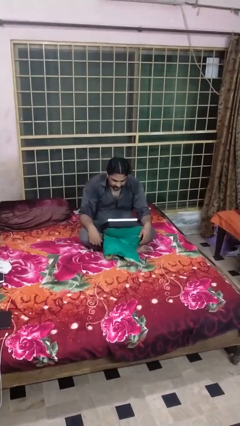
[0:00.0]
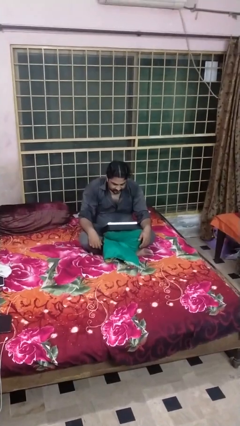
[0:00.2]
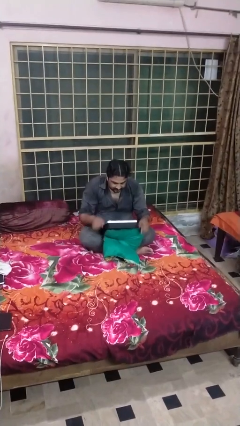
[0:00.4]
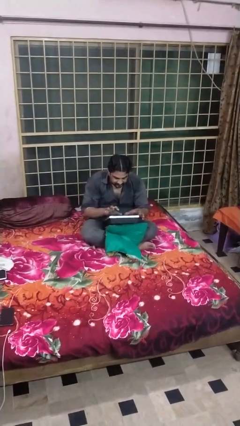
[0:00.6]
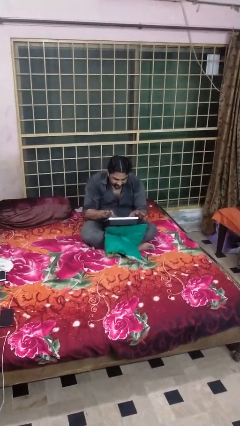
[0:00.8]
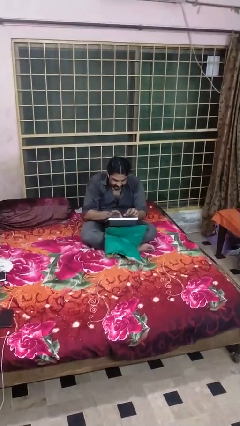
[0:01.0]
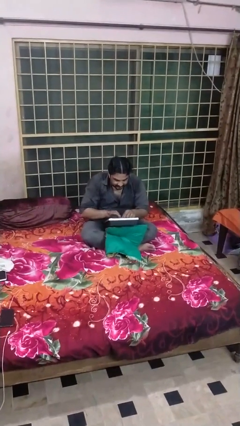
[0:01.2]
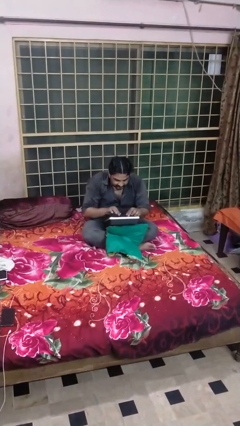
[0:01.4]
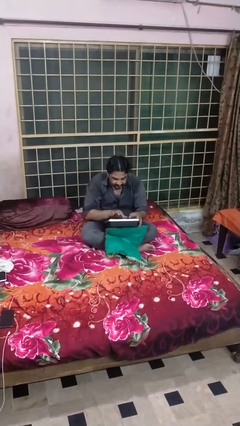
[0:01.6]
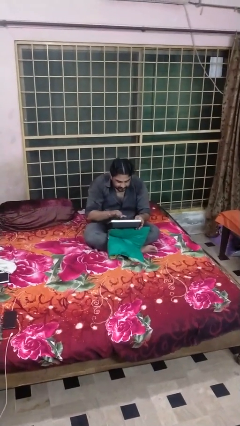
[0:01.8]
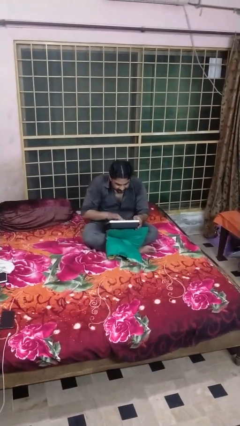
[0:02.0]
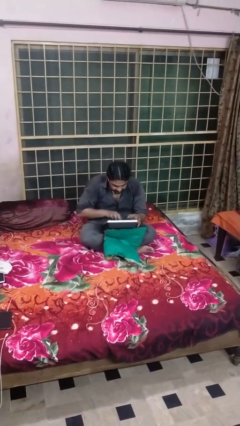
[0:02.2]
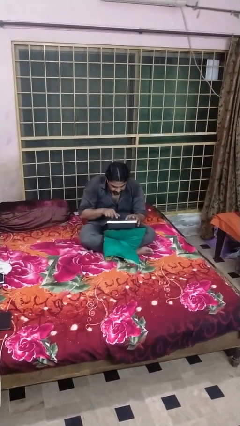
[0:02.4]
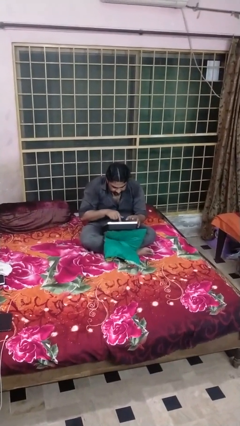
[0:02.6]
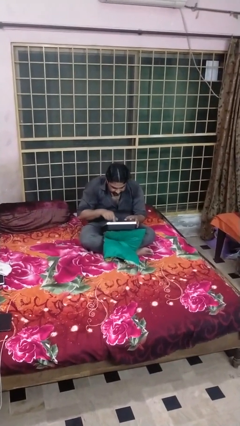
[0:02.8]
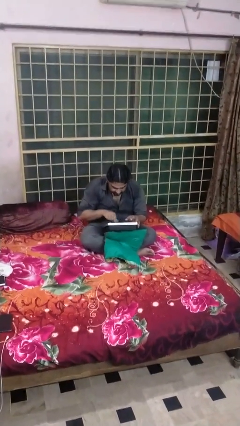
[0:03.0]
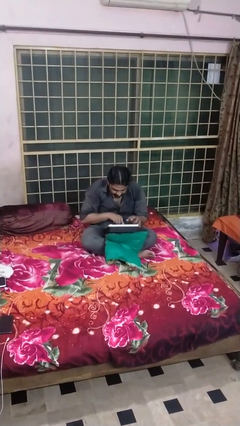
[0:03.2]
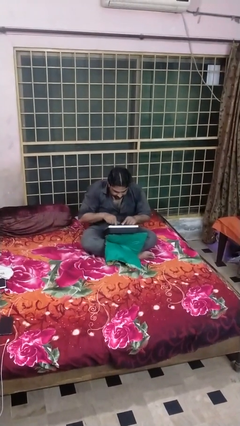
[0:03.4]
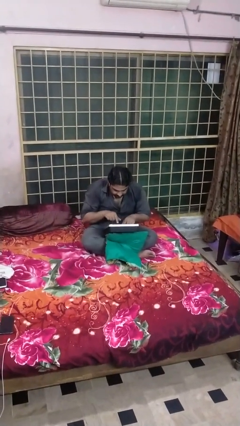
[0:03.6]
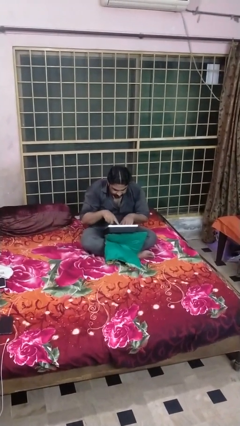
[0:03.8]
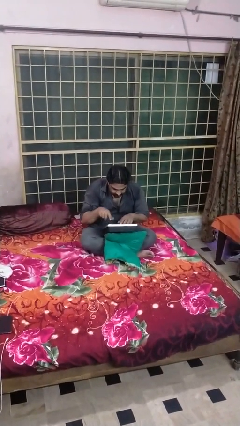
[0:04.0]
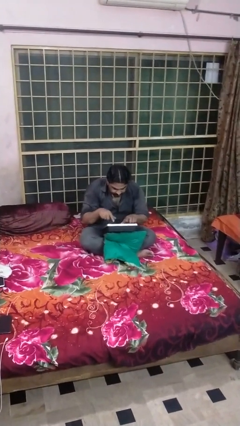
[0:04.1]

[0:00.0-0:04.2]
person interacts with tablet

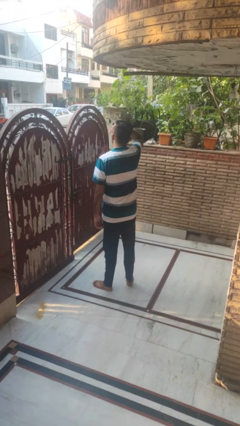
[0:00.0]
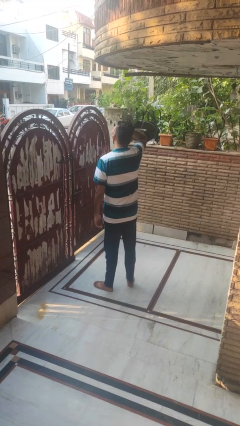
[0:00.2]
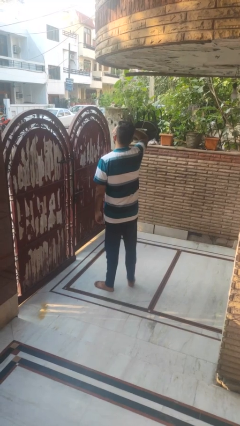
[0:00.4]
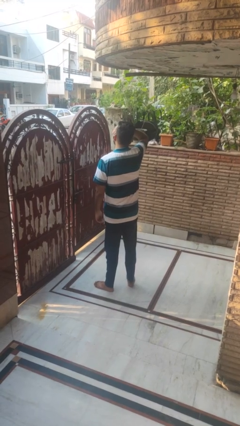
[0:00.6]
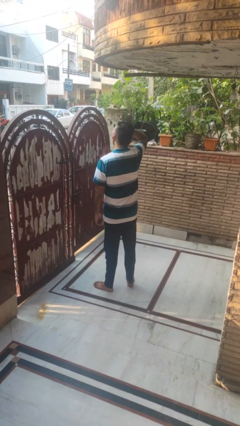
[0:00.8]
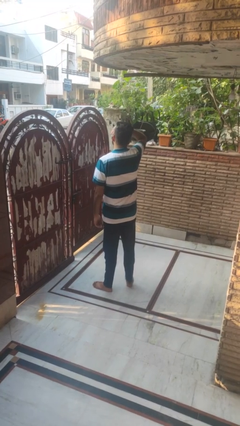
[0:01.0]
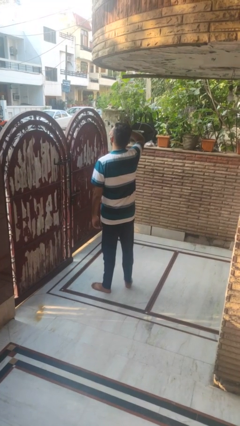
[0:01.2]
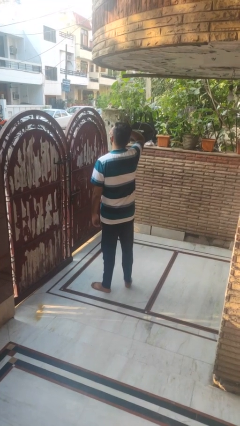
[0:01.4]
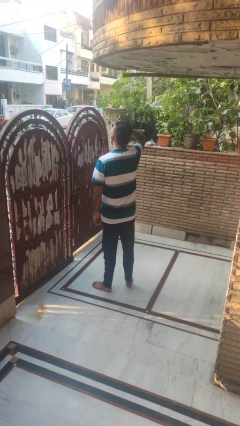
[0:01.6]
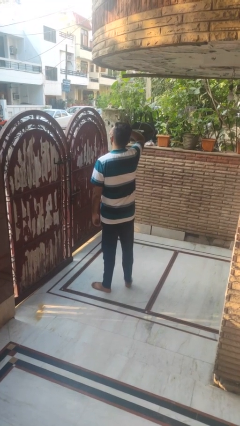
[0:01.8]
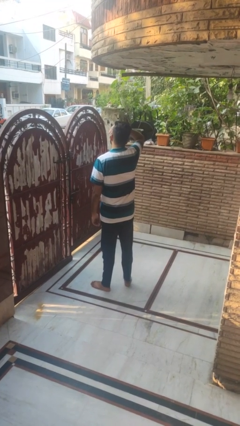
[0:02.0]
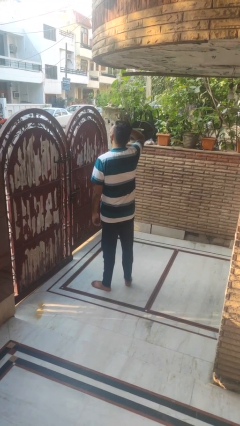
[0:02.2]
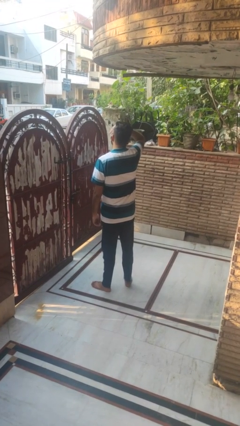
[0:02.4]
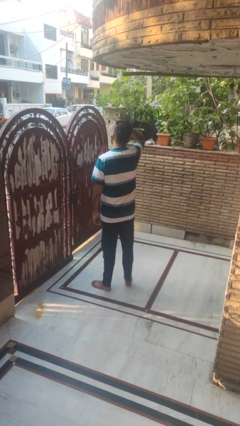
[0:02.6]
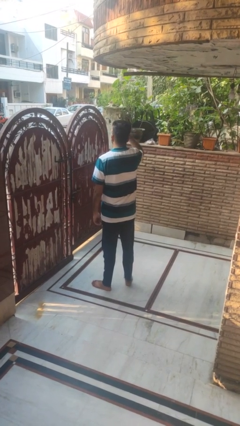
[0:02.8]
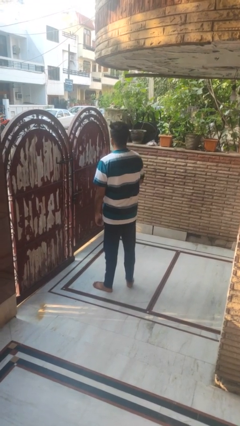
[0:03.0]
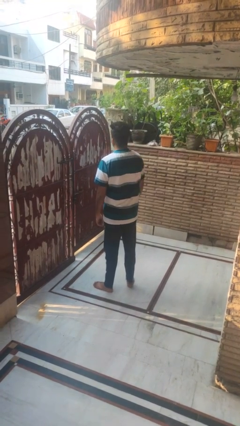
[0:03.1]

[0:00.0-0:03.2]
person shades eyes

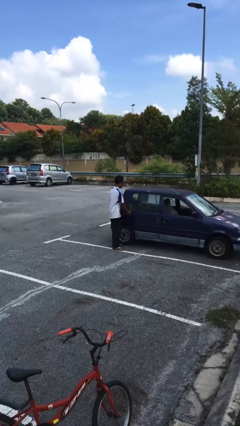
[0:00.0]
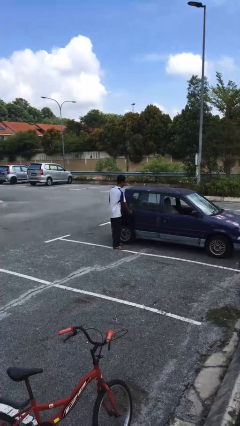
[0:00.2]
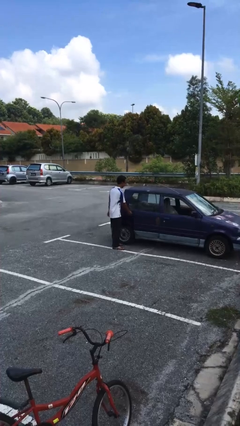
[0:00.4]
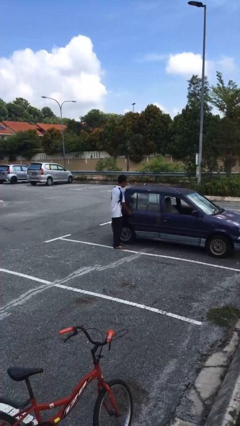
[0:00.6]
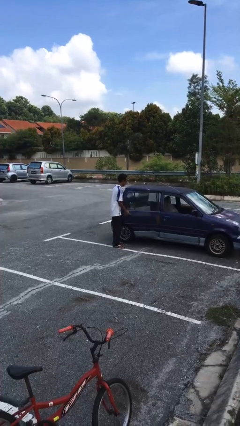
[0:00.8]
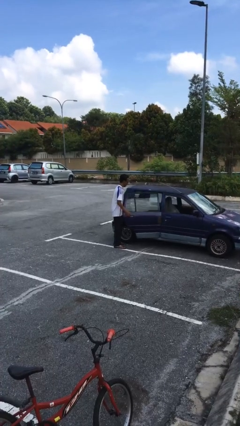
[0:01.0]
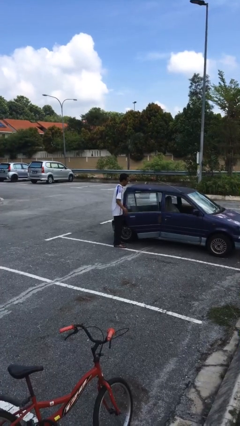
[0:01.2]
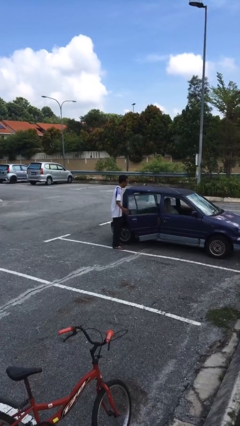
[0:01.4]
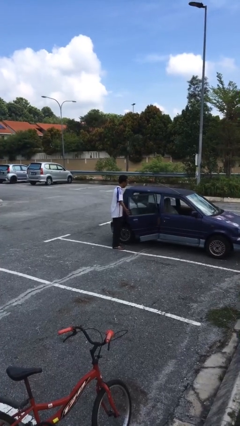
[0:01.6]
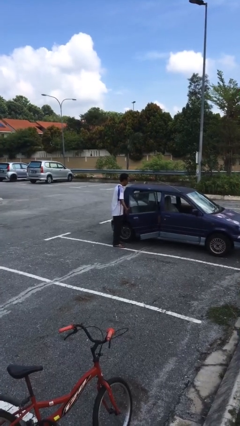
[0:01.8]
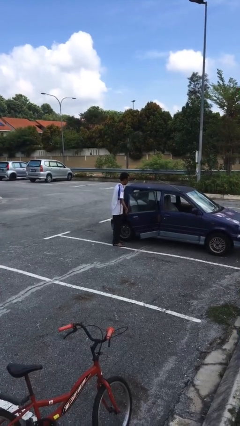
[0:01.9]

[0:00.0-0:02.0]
person opens car door

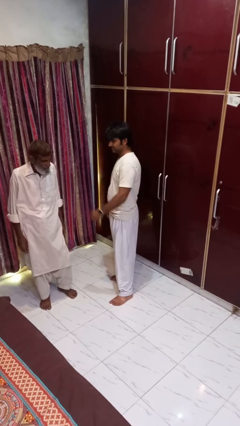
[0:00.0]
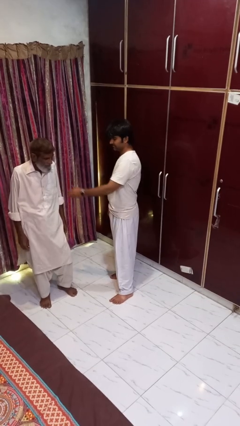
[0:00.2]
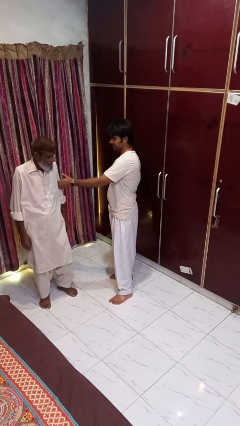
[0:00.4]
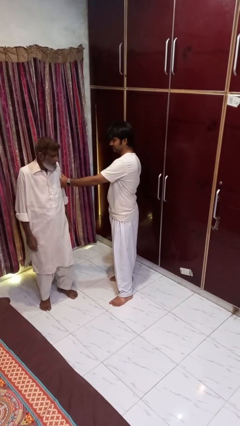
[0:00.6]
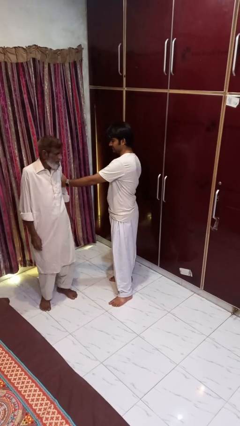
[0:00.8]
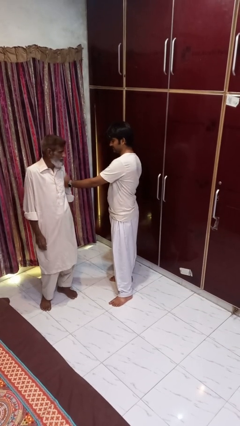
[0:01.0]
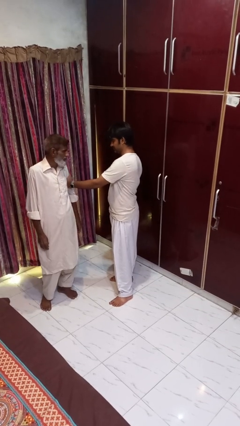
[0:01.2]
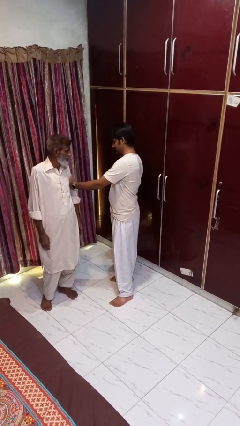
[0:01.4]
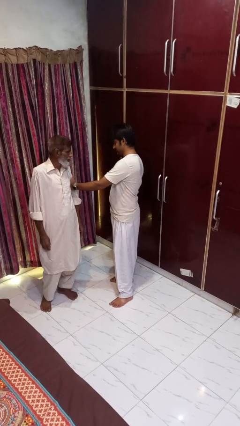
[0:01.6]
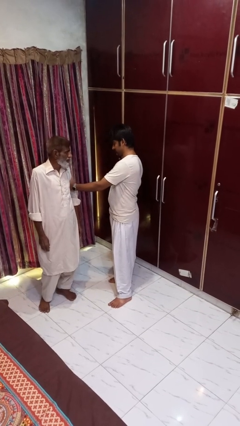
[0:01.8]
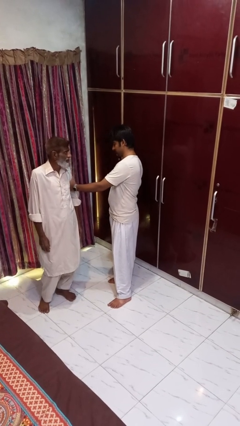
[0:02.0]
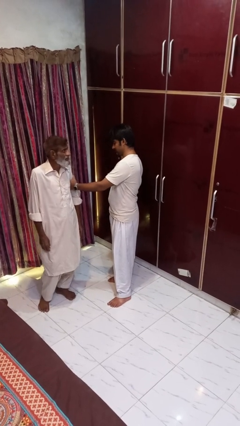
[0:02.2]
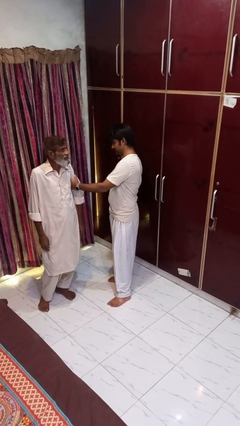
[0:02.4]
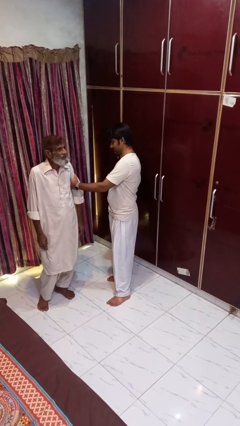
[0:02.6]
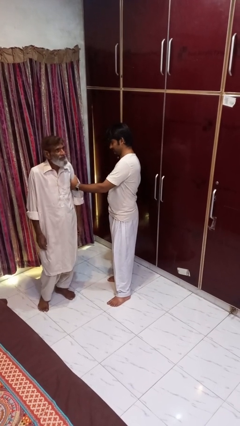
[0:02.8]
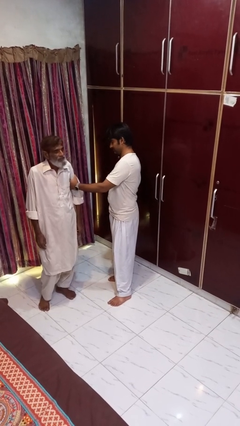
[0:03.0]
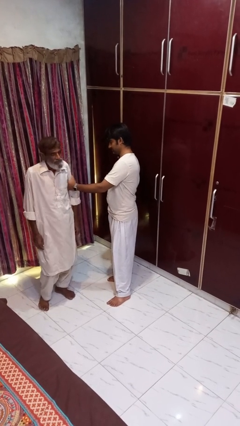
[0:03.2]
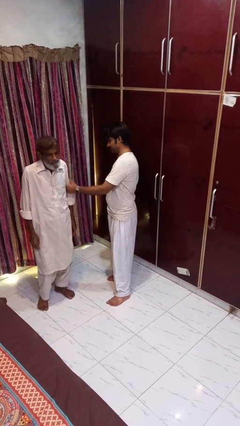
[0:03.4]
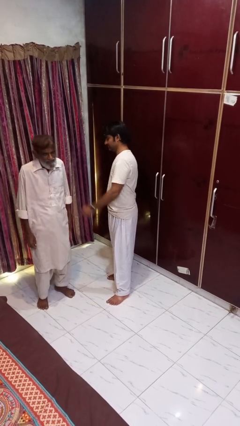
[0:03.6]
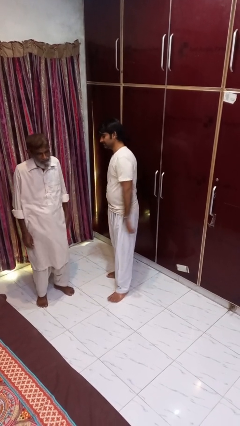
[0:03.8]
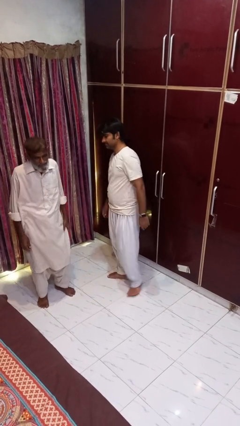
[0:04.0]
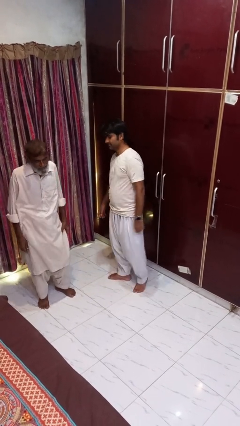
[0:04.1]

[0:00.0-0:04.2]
person grabs person by bicep

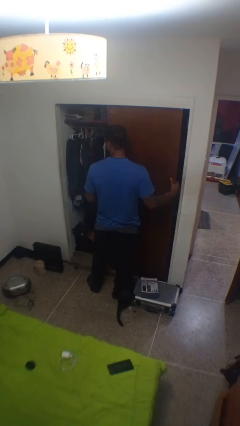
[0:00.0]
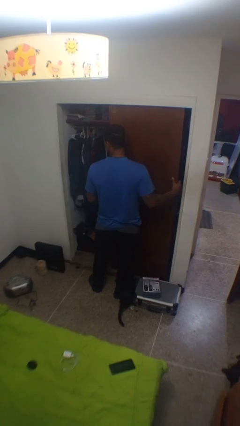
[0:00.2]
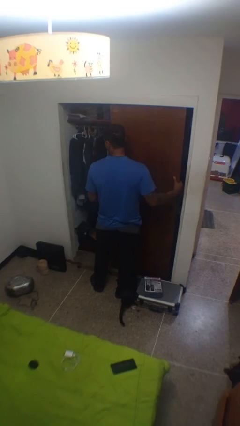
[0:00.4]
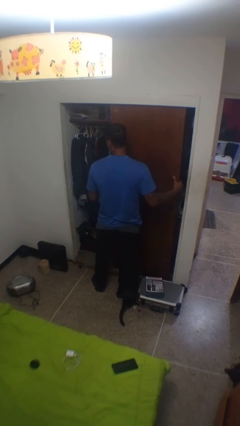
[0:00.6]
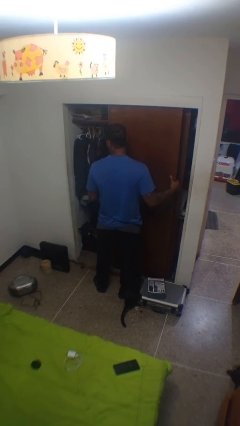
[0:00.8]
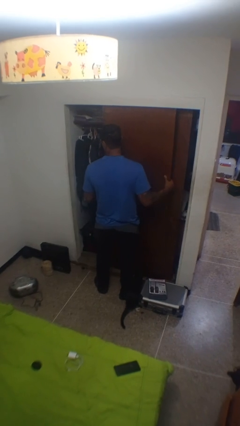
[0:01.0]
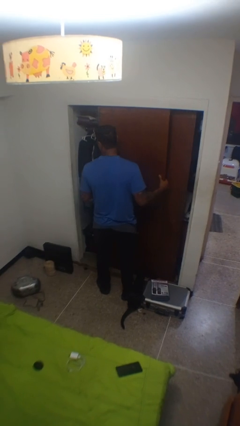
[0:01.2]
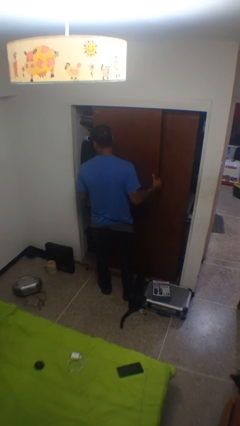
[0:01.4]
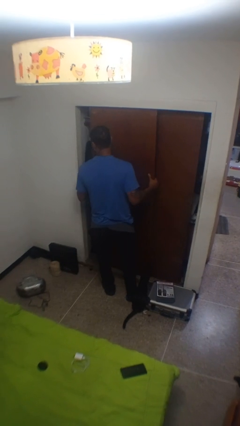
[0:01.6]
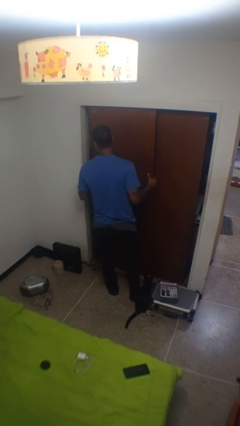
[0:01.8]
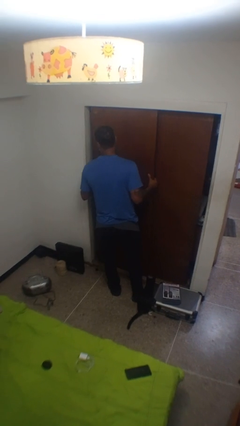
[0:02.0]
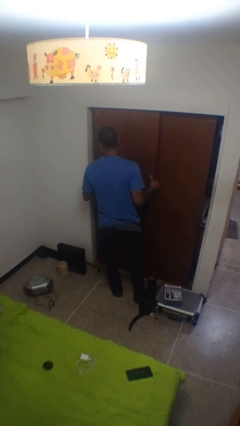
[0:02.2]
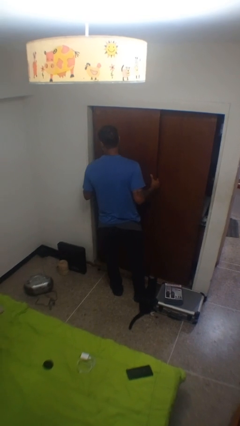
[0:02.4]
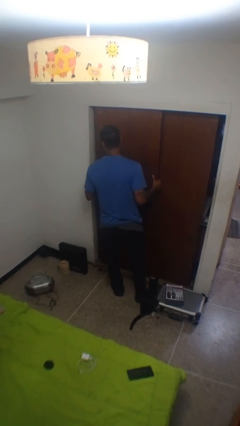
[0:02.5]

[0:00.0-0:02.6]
person closes closet door

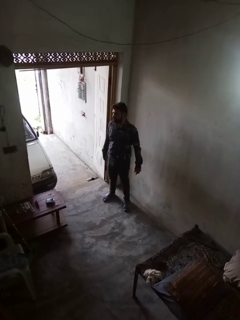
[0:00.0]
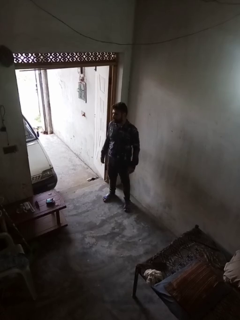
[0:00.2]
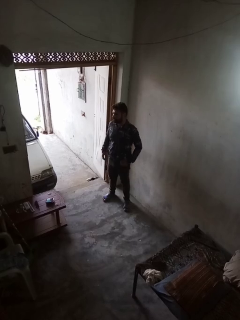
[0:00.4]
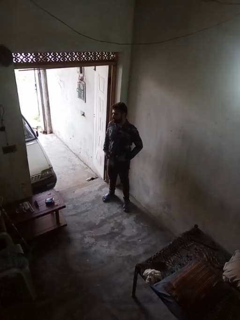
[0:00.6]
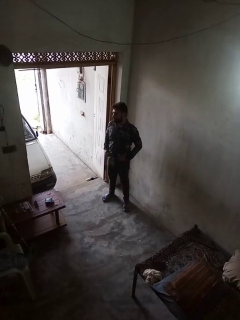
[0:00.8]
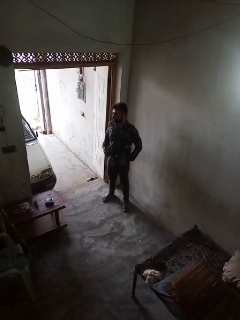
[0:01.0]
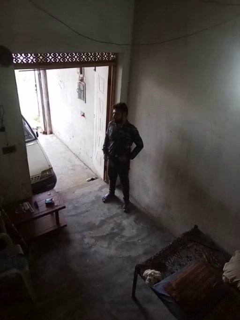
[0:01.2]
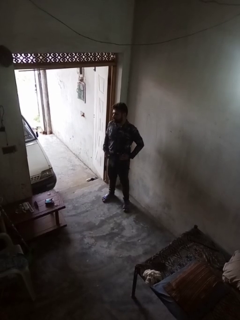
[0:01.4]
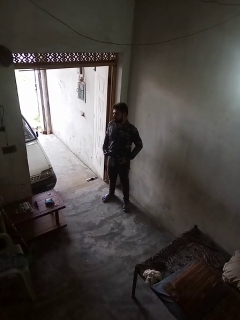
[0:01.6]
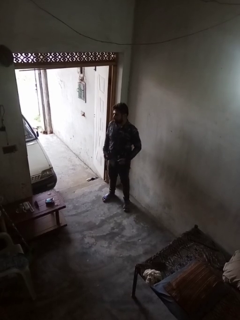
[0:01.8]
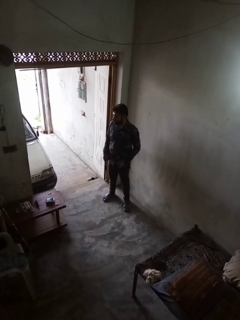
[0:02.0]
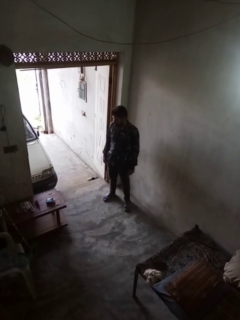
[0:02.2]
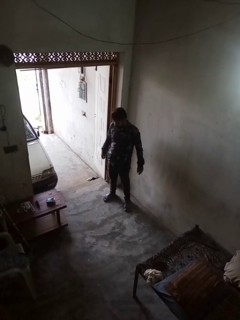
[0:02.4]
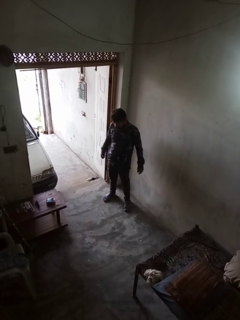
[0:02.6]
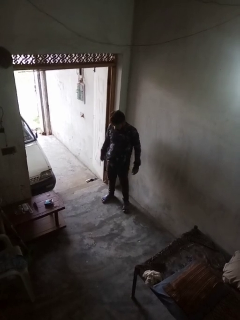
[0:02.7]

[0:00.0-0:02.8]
person untucks shirt
